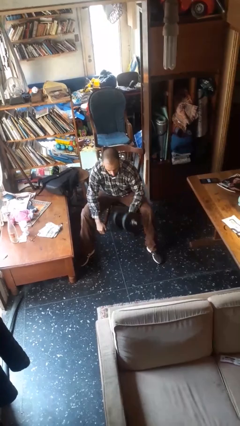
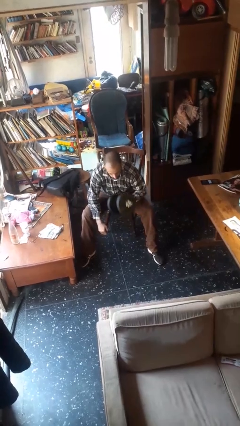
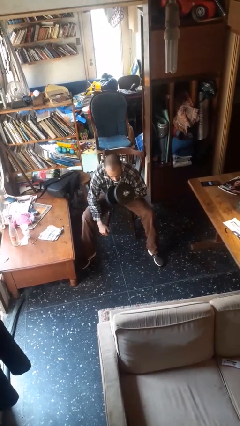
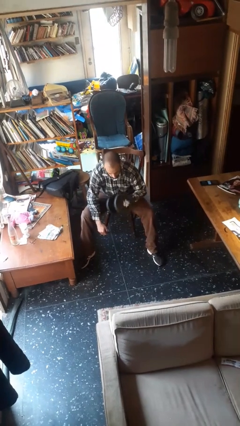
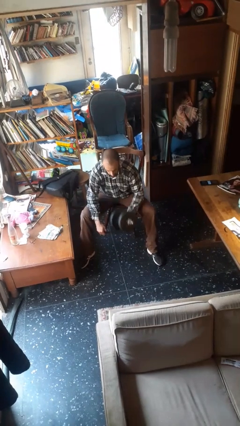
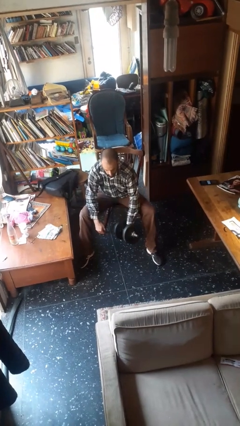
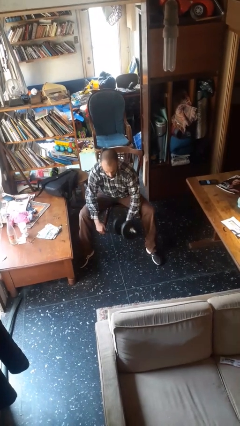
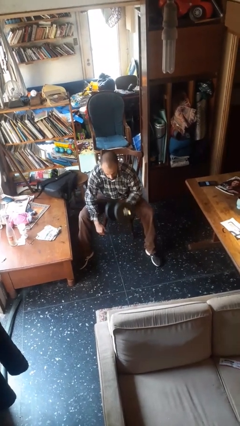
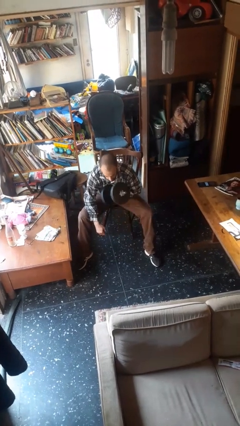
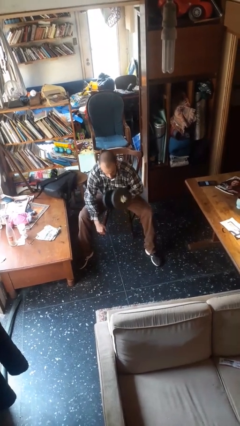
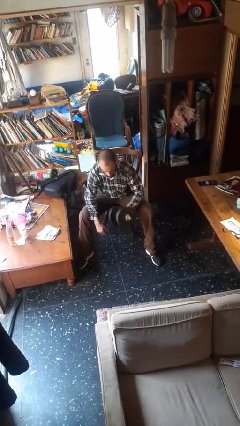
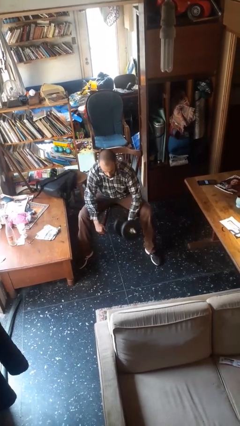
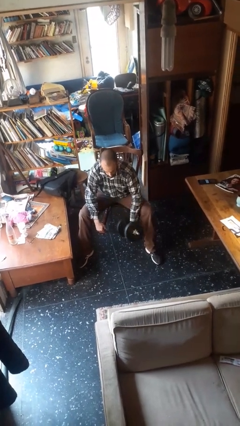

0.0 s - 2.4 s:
person lifts dumbbells

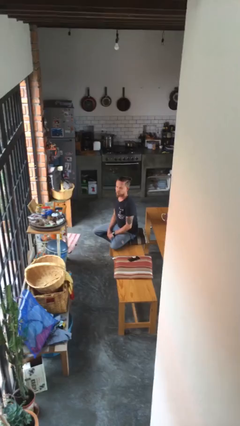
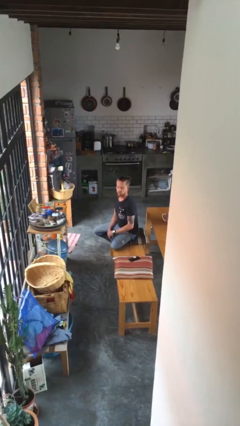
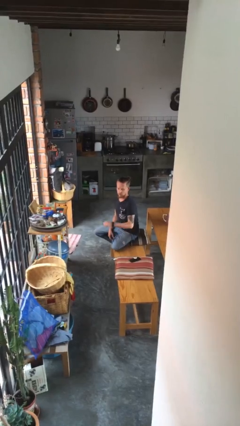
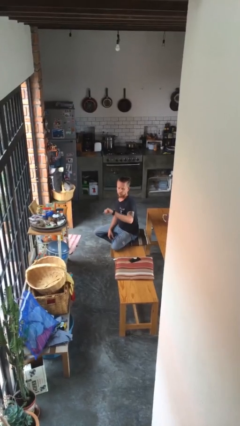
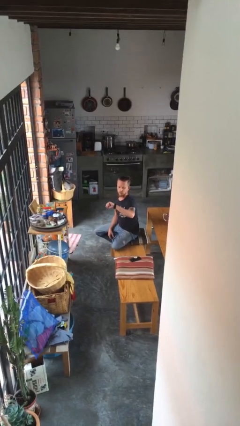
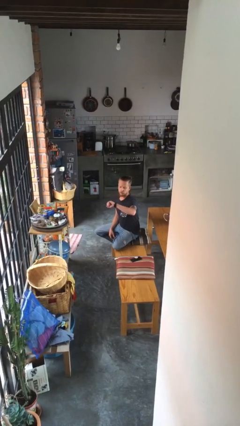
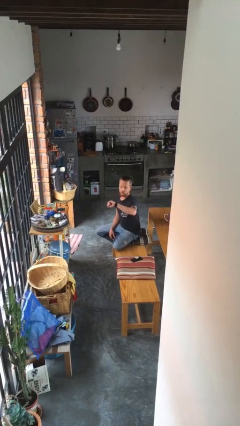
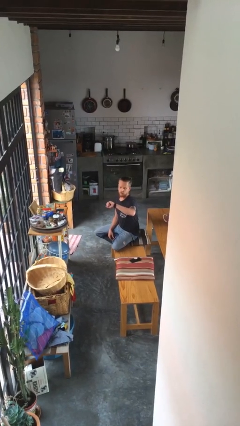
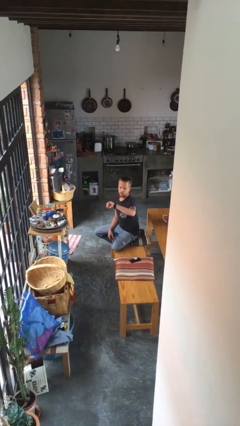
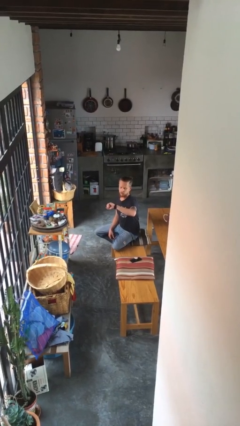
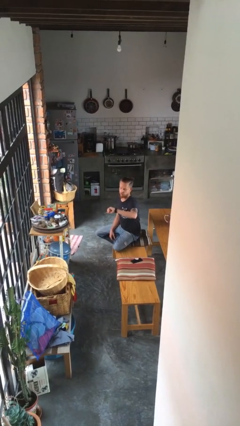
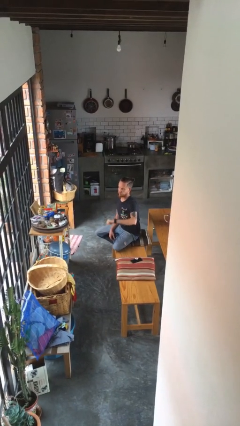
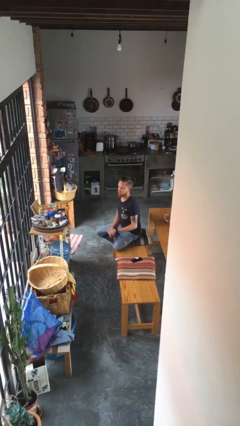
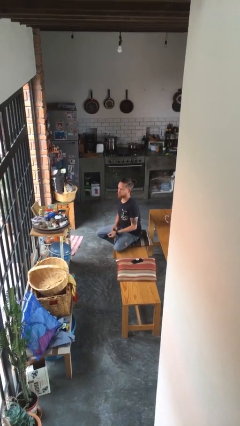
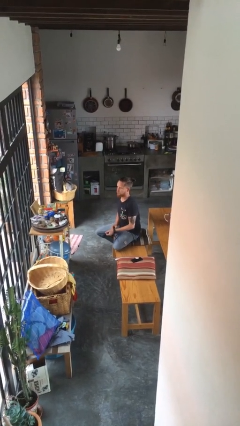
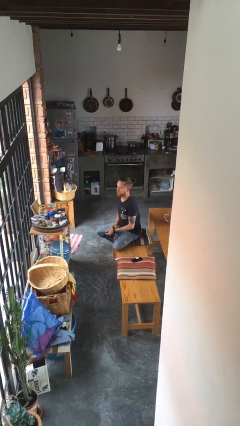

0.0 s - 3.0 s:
person looks at wristwatch

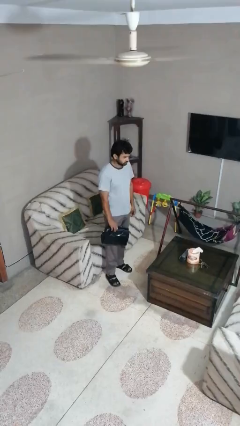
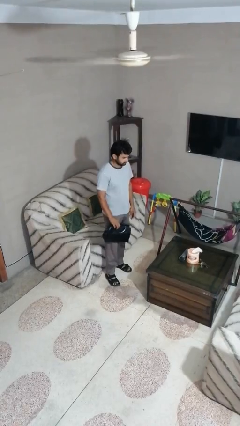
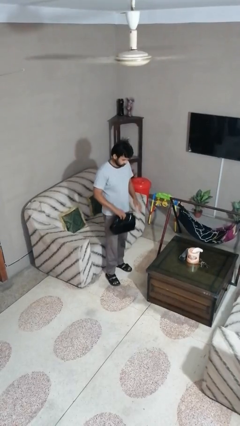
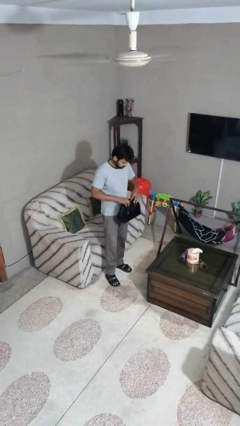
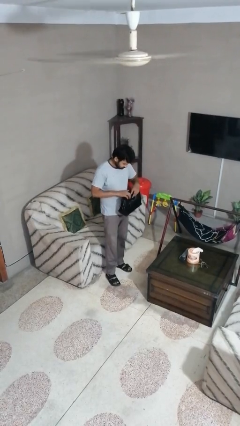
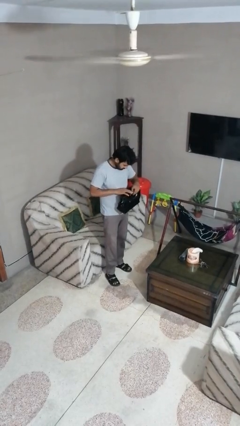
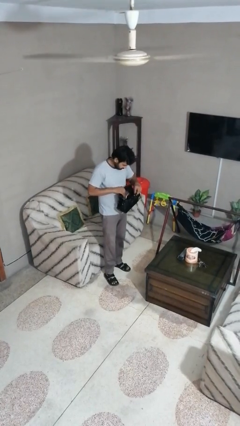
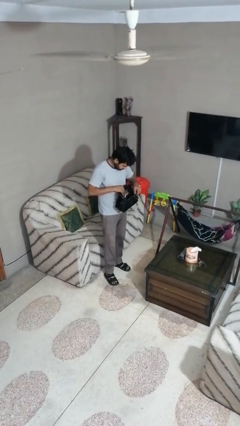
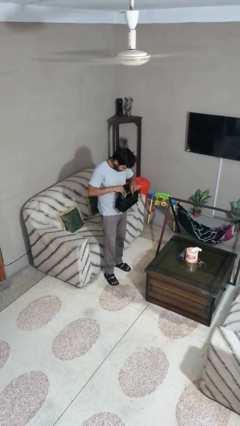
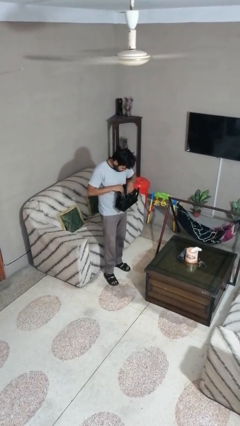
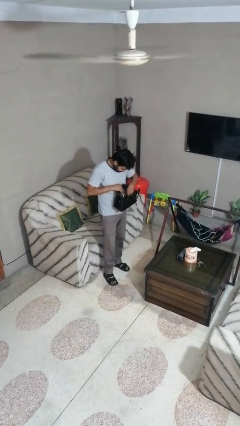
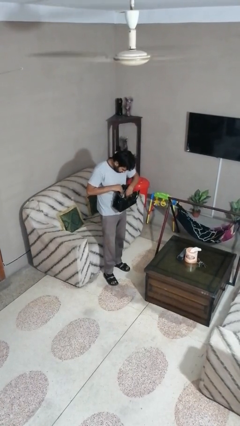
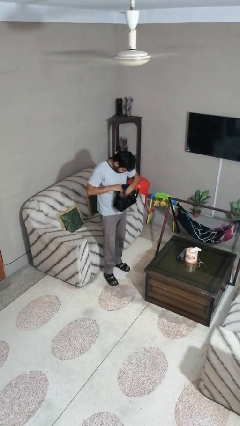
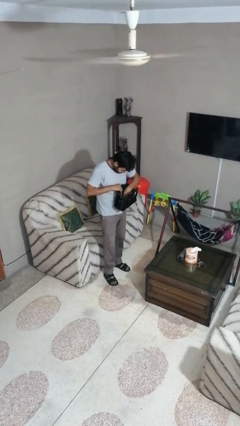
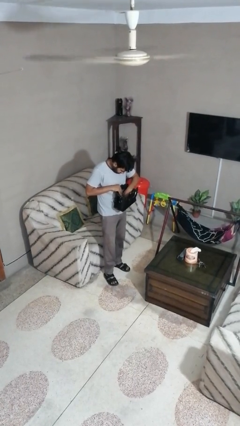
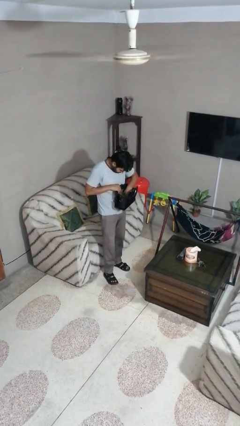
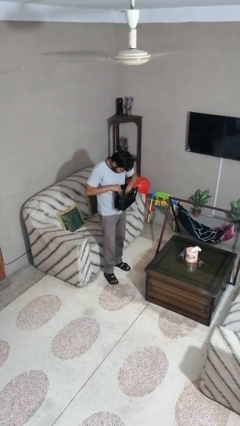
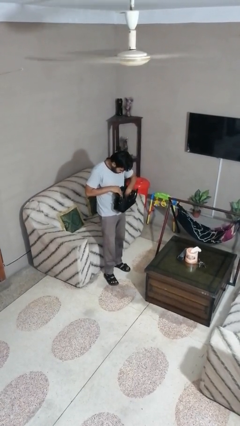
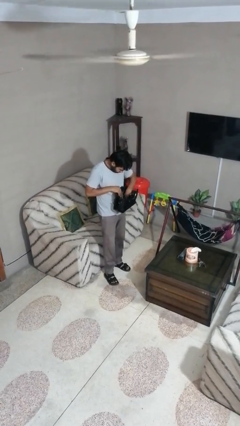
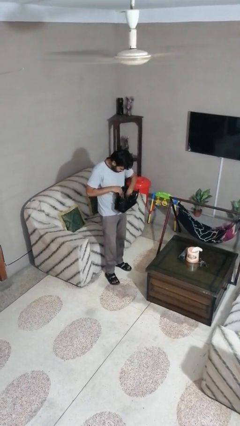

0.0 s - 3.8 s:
person searches in purse

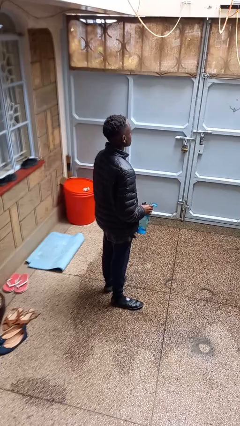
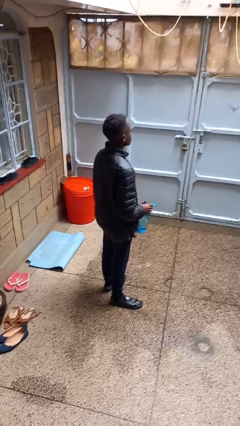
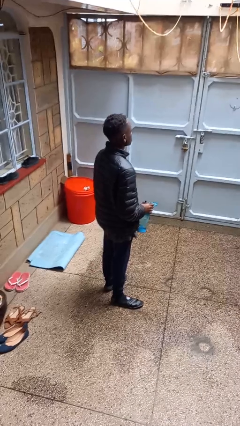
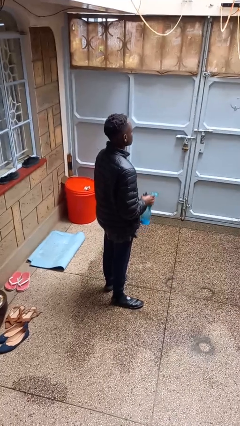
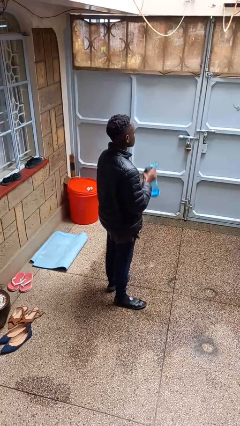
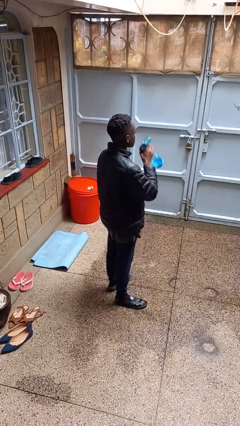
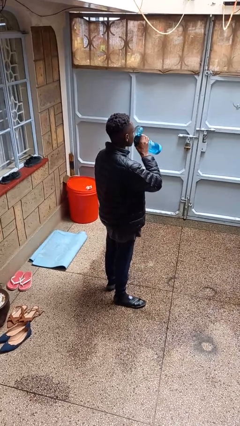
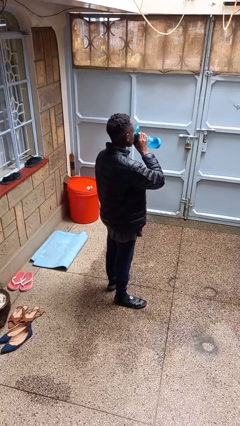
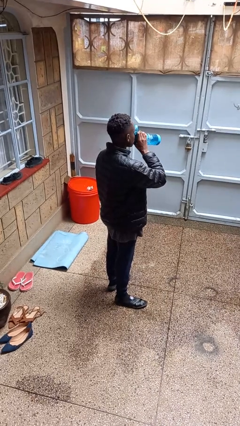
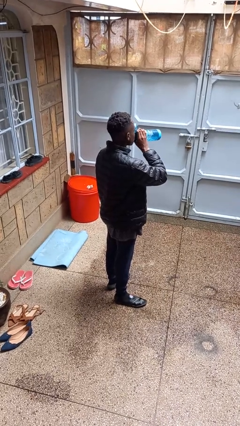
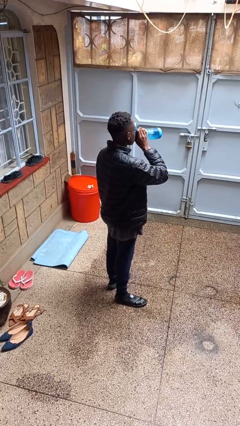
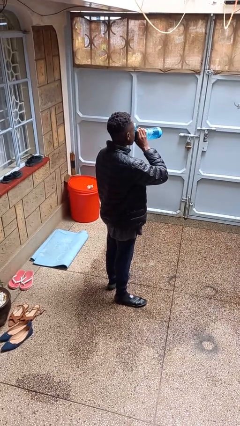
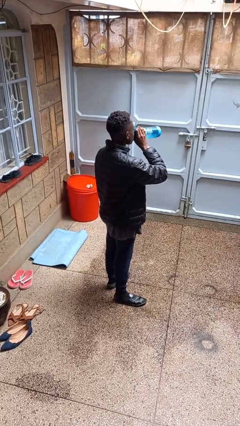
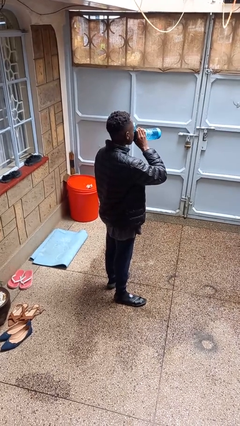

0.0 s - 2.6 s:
person drinks from bottle

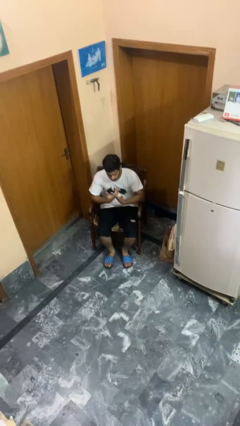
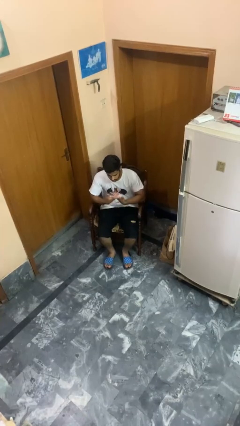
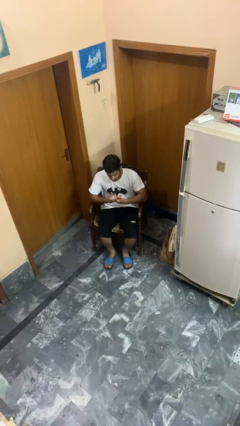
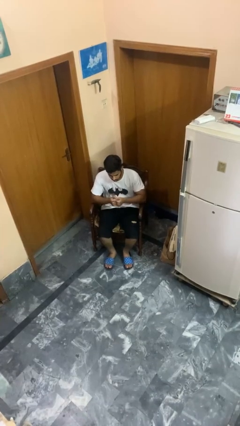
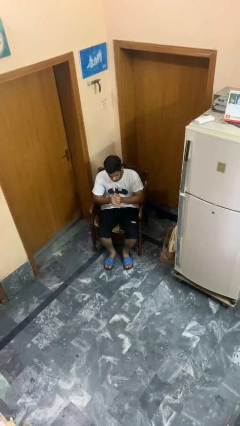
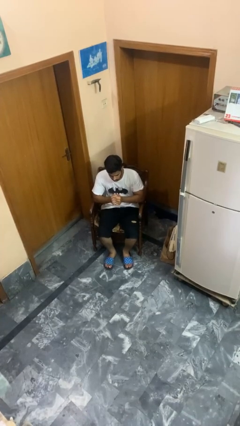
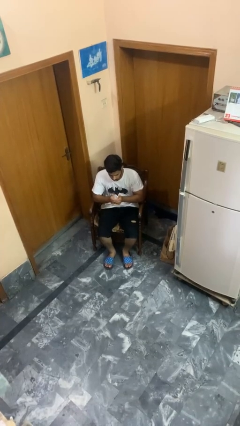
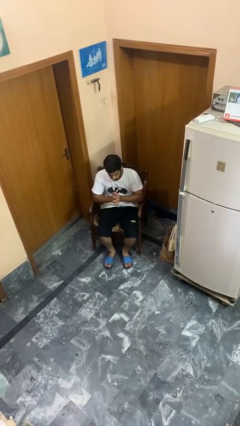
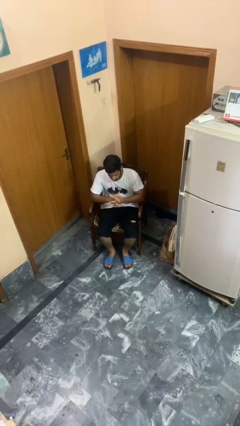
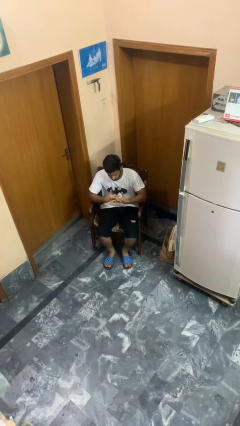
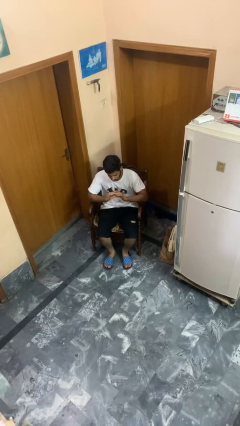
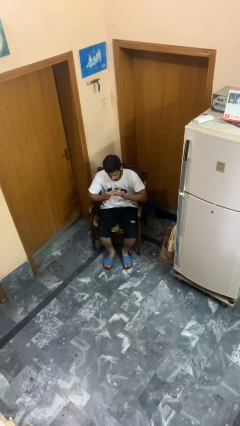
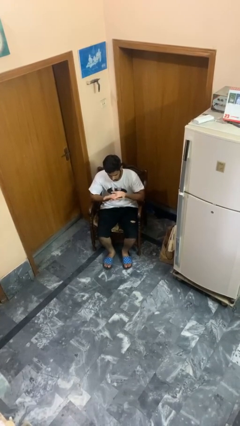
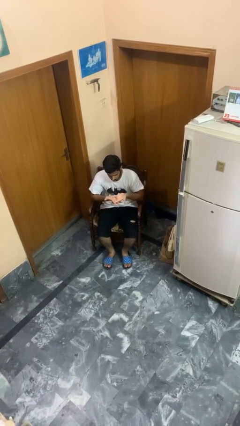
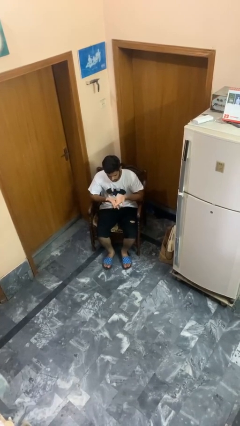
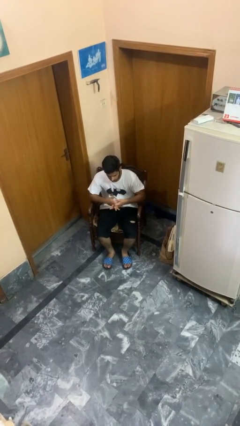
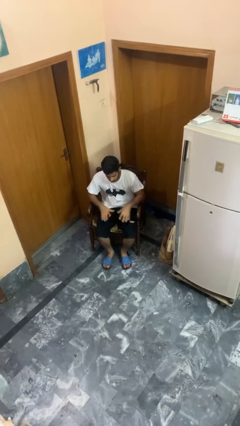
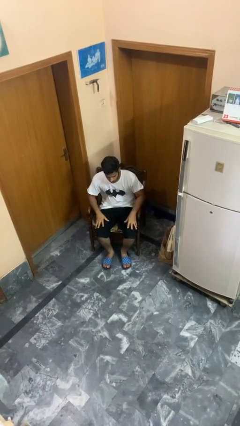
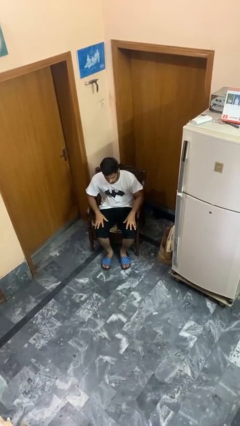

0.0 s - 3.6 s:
person cracks knuckles

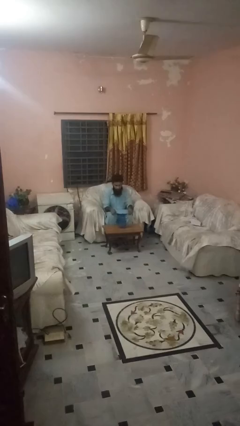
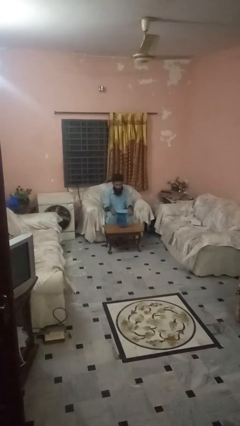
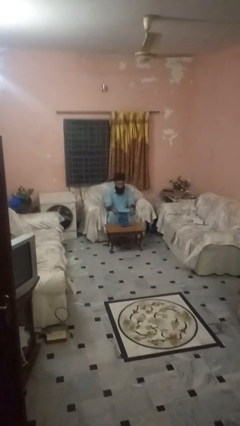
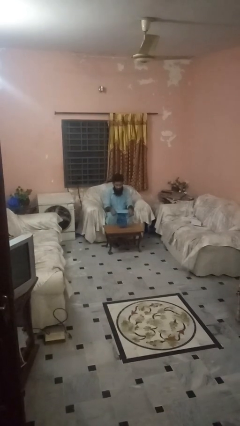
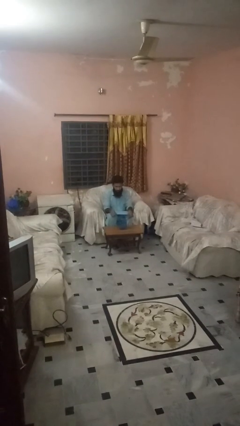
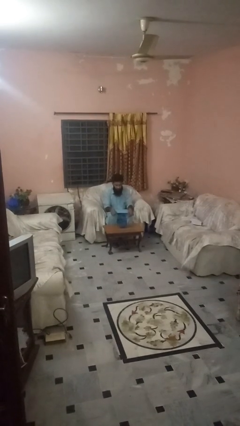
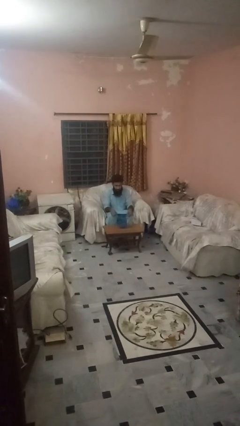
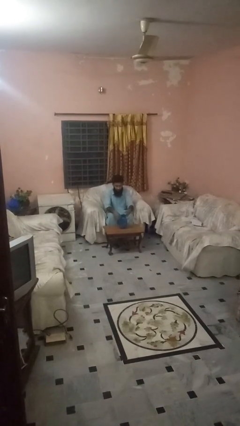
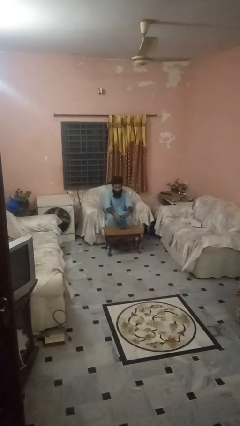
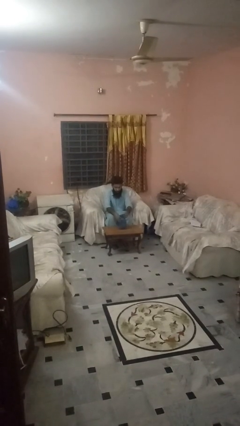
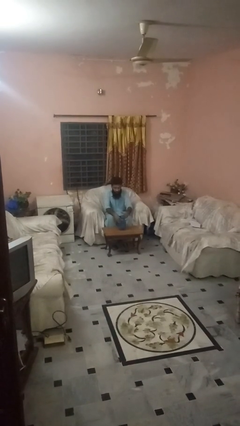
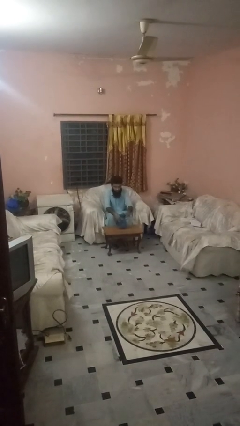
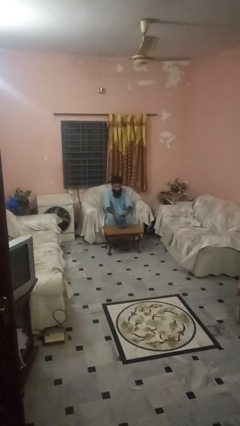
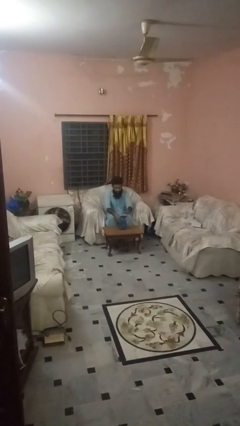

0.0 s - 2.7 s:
person unscrews lid from bottle
